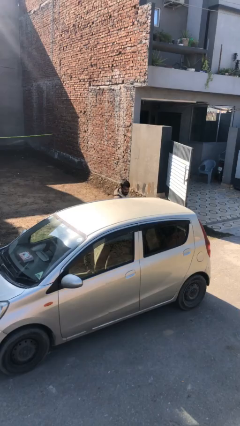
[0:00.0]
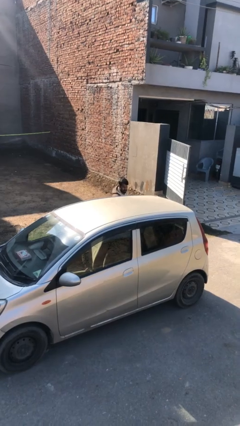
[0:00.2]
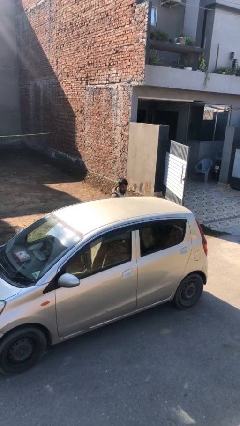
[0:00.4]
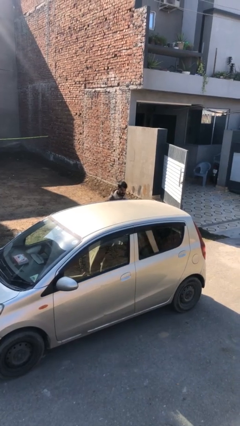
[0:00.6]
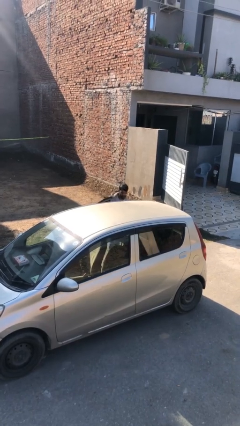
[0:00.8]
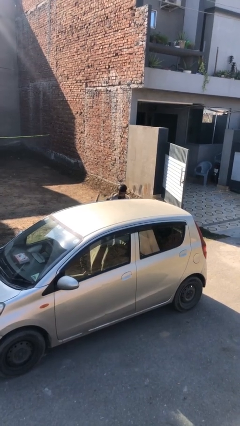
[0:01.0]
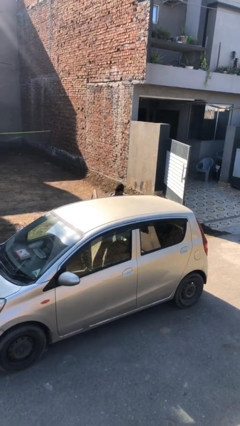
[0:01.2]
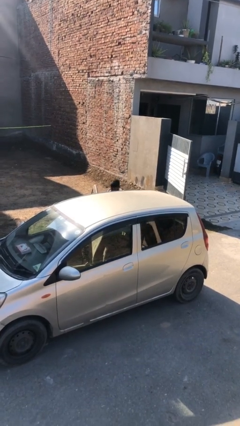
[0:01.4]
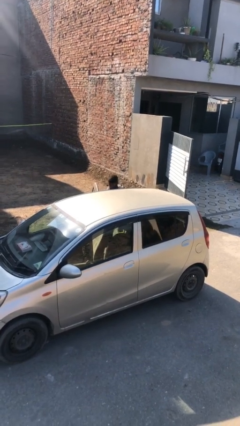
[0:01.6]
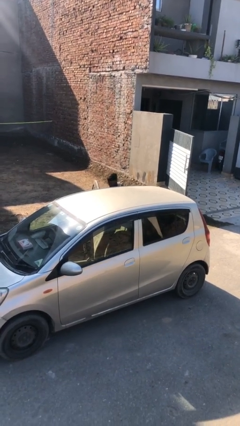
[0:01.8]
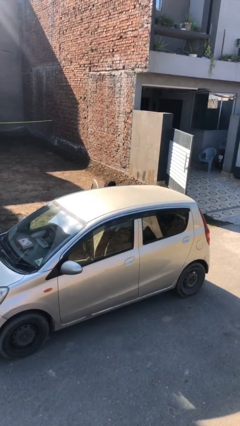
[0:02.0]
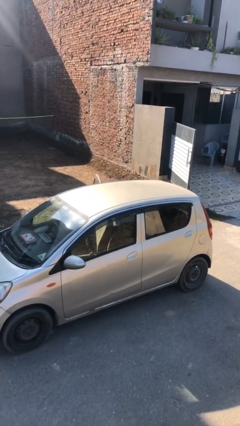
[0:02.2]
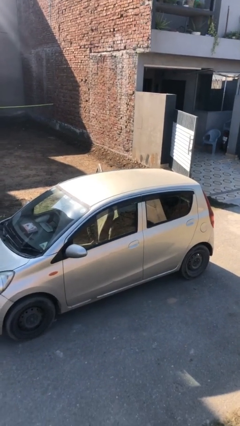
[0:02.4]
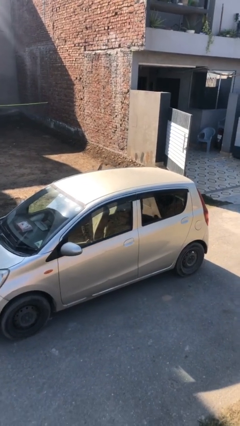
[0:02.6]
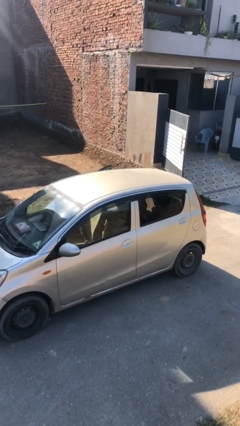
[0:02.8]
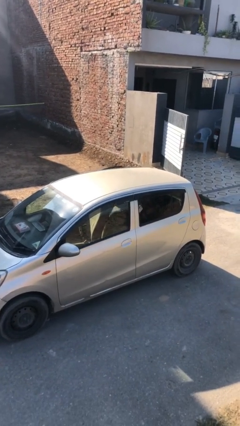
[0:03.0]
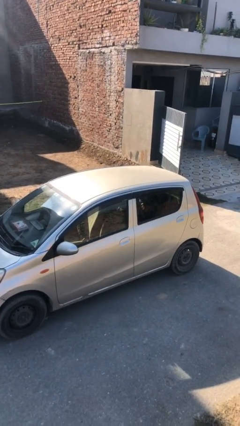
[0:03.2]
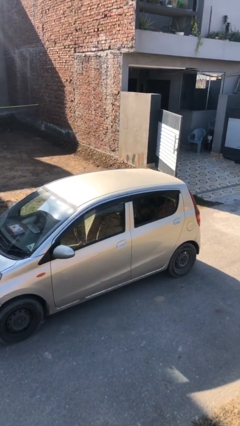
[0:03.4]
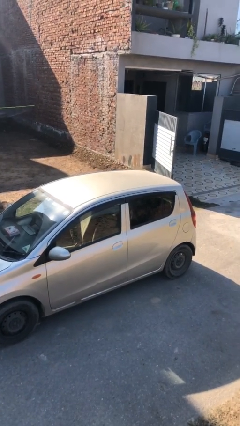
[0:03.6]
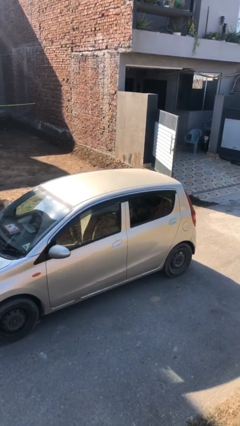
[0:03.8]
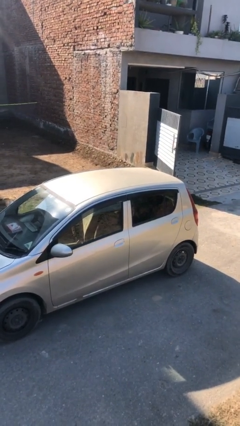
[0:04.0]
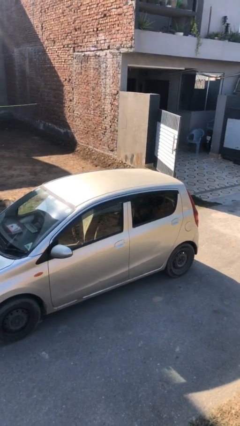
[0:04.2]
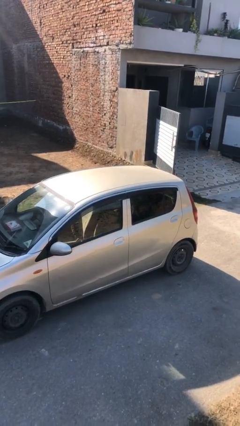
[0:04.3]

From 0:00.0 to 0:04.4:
car picks up person

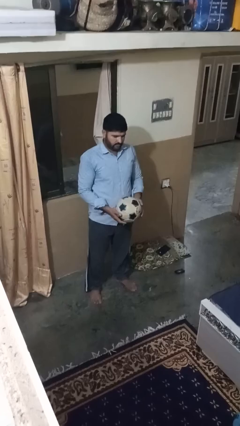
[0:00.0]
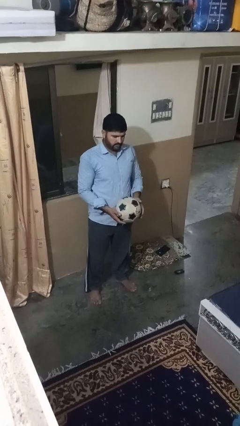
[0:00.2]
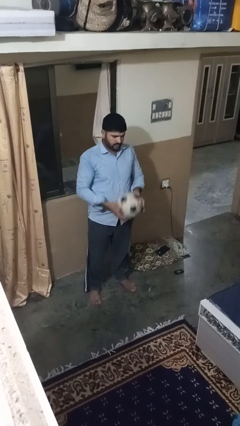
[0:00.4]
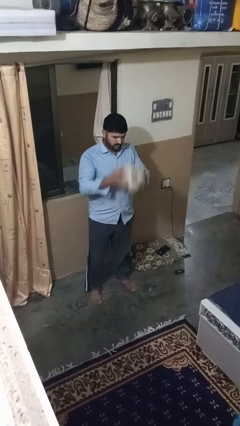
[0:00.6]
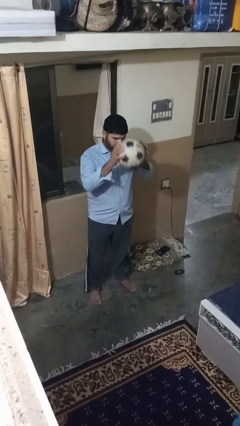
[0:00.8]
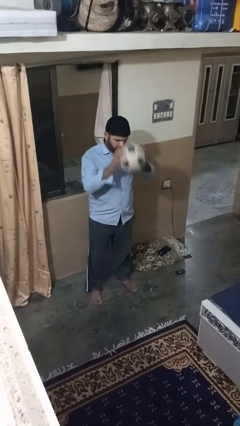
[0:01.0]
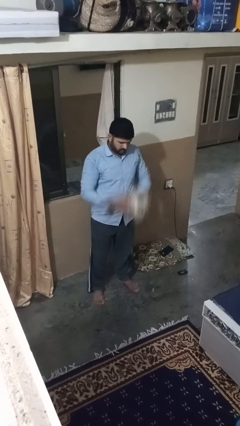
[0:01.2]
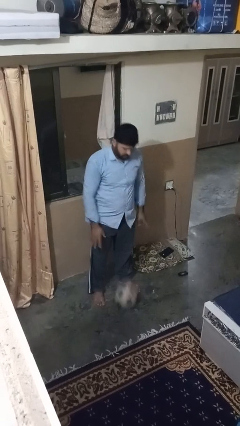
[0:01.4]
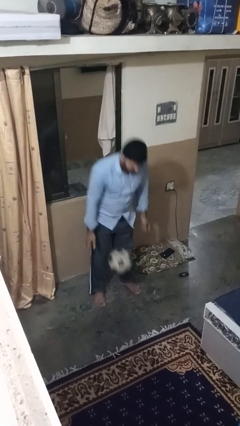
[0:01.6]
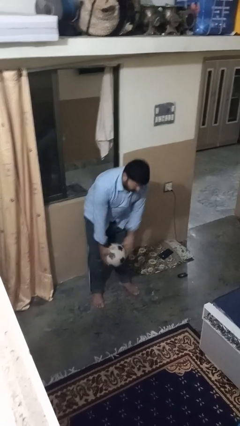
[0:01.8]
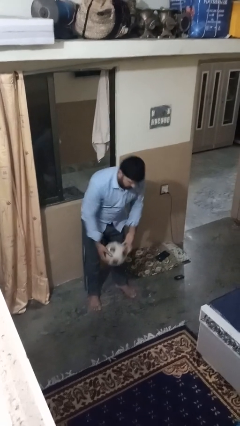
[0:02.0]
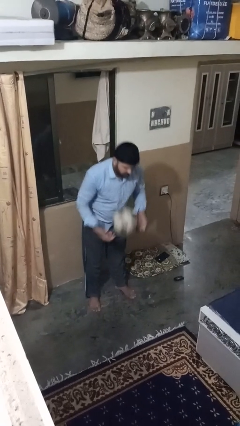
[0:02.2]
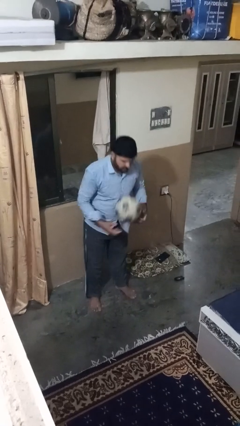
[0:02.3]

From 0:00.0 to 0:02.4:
person bounces ball on floor

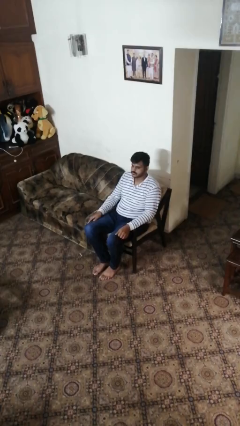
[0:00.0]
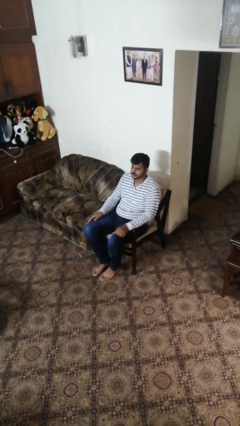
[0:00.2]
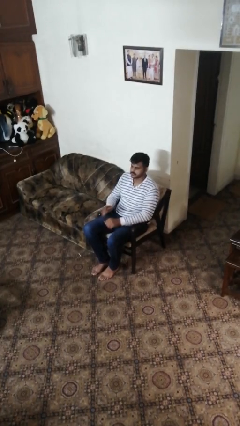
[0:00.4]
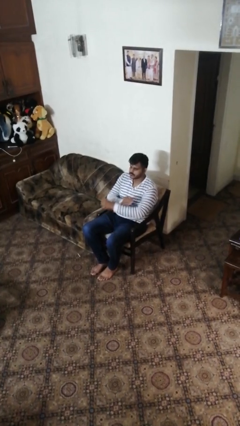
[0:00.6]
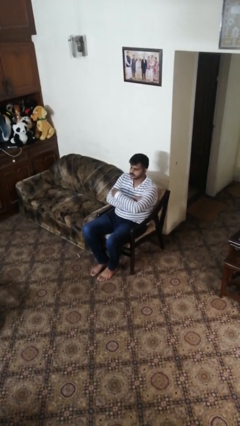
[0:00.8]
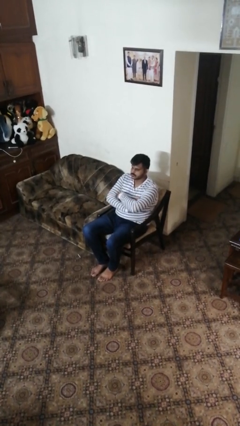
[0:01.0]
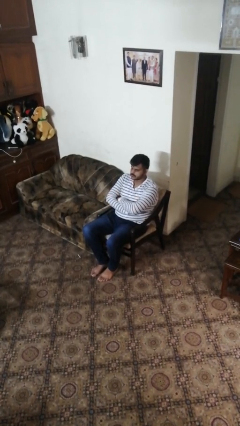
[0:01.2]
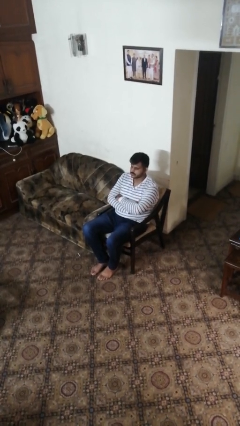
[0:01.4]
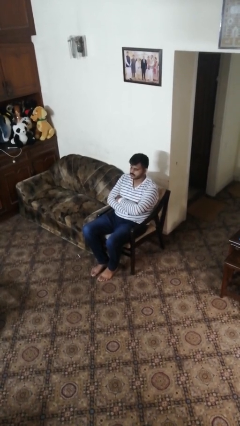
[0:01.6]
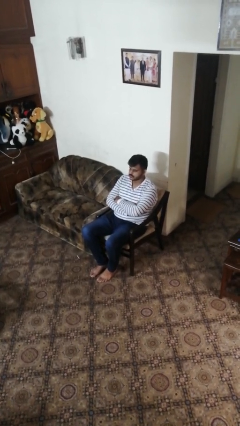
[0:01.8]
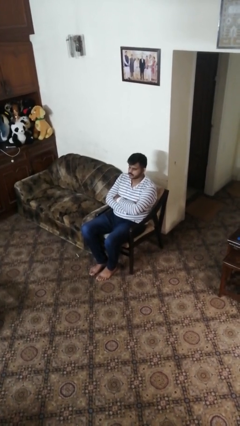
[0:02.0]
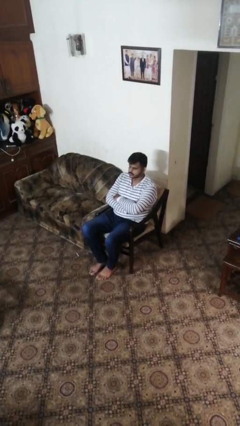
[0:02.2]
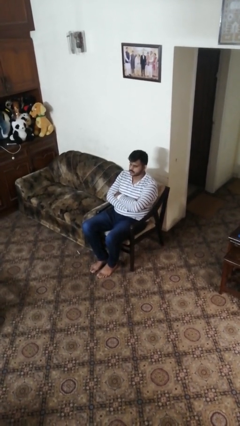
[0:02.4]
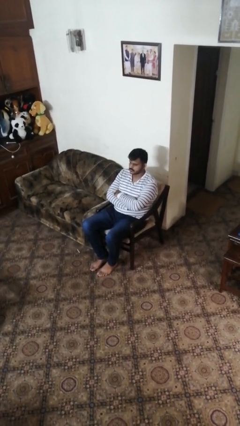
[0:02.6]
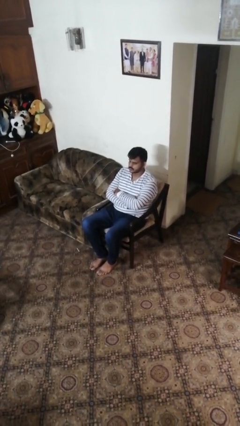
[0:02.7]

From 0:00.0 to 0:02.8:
person crosses arms

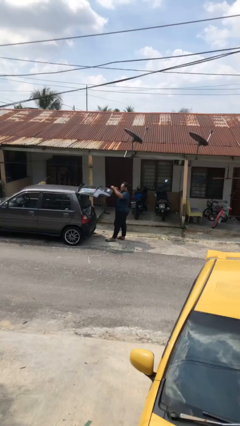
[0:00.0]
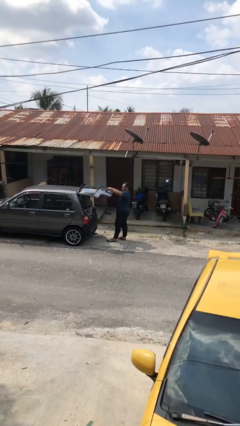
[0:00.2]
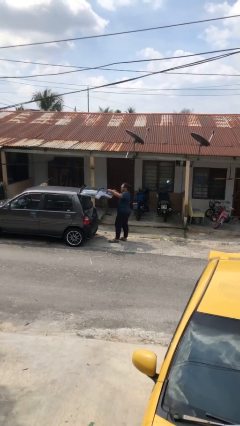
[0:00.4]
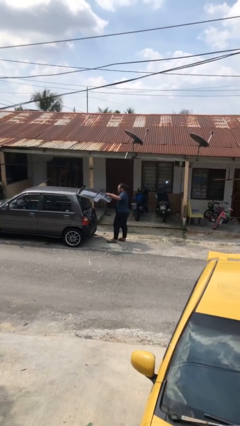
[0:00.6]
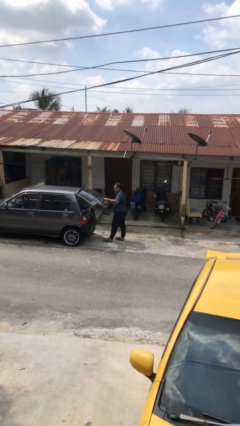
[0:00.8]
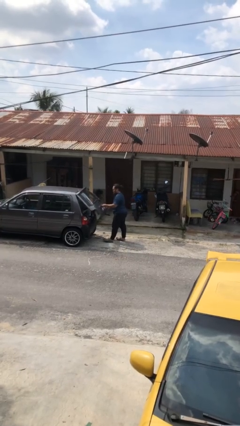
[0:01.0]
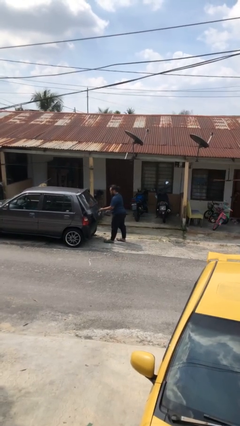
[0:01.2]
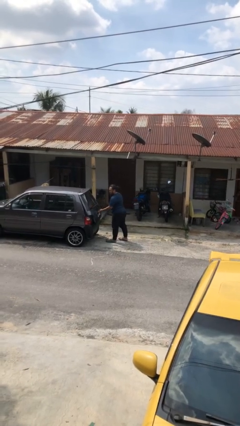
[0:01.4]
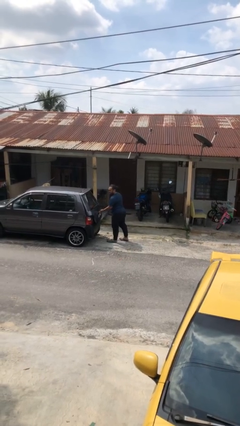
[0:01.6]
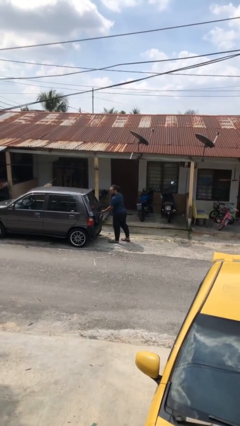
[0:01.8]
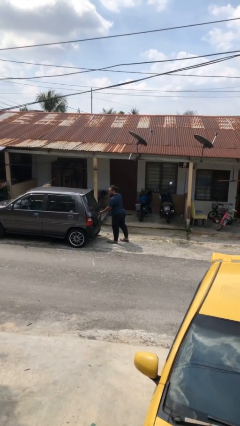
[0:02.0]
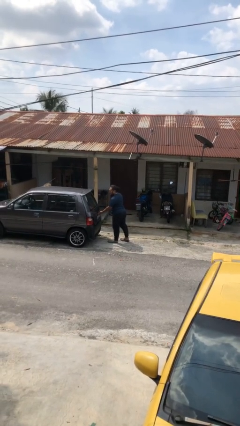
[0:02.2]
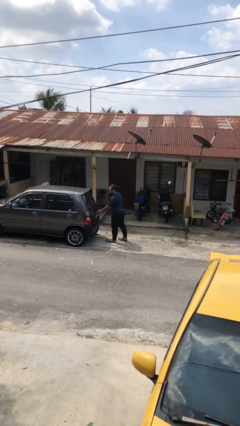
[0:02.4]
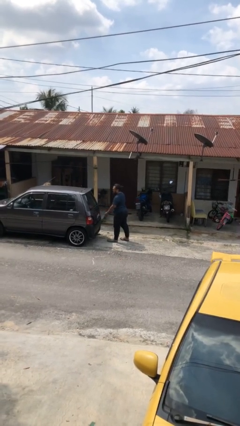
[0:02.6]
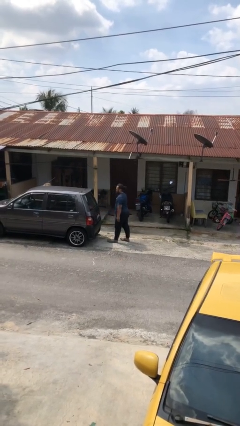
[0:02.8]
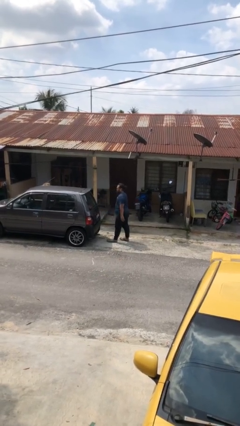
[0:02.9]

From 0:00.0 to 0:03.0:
person closes car trunk

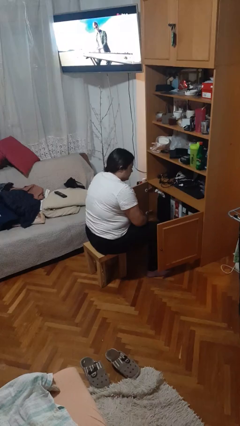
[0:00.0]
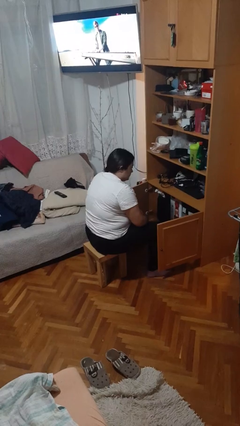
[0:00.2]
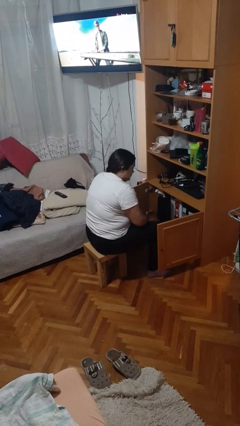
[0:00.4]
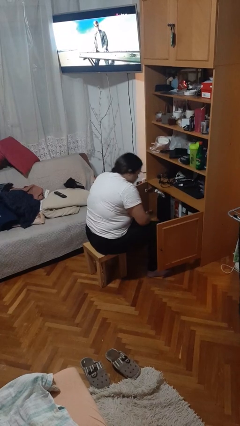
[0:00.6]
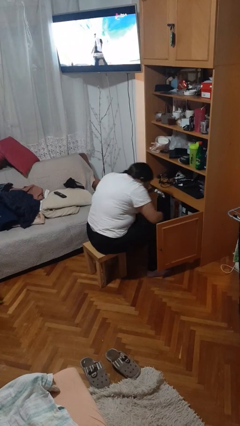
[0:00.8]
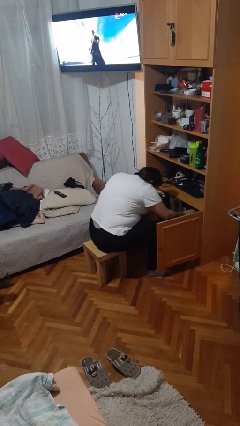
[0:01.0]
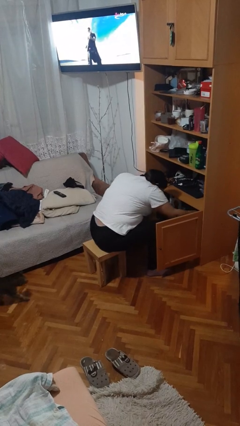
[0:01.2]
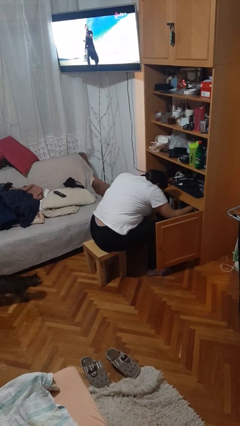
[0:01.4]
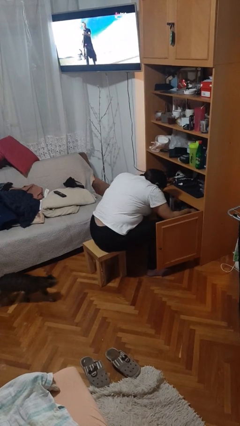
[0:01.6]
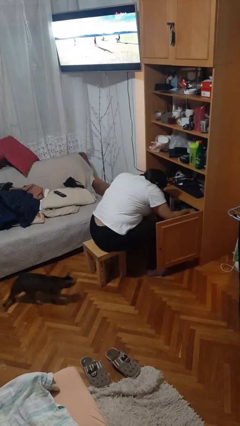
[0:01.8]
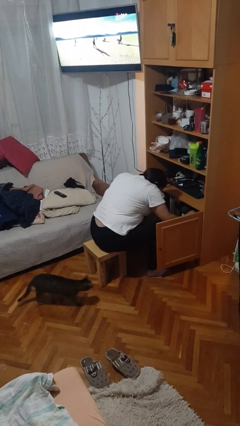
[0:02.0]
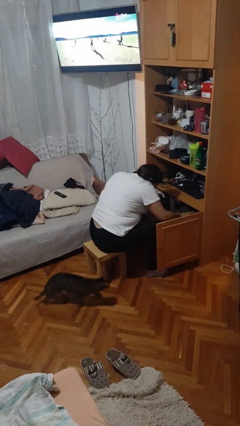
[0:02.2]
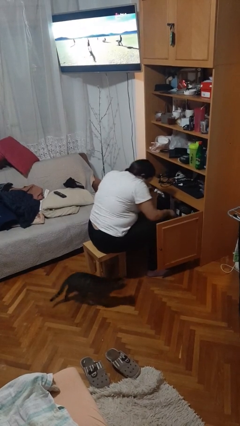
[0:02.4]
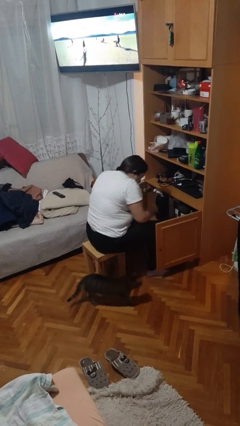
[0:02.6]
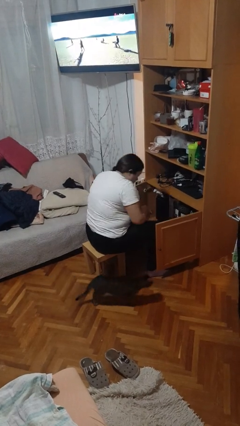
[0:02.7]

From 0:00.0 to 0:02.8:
person searches in cabinet

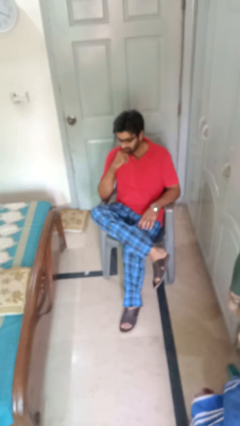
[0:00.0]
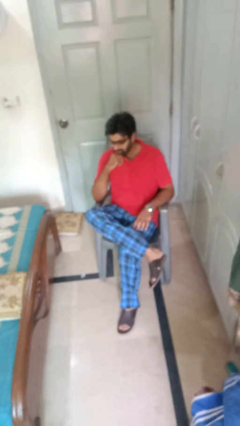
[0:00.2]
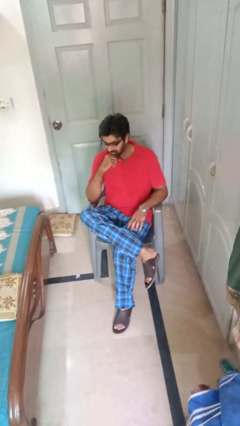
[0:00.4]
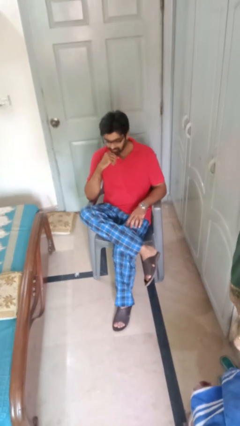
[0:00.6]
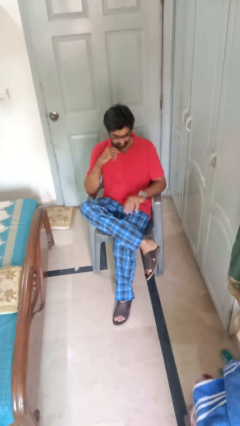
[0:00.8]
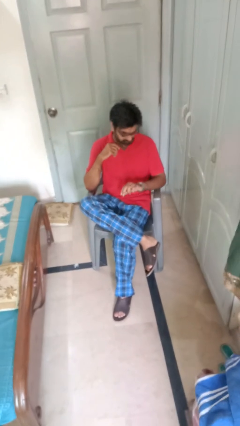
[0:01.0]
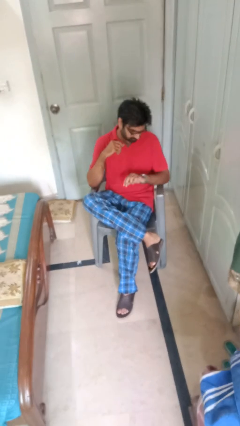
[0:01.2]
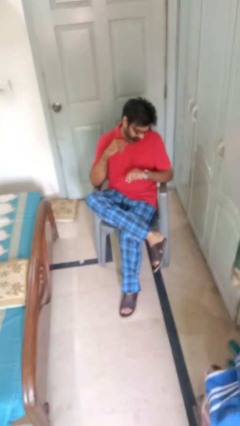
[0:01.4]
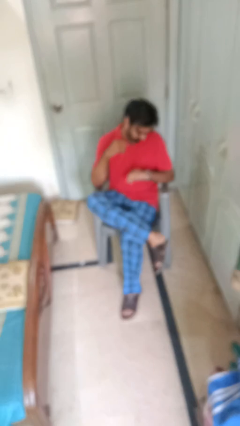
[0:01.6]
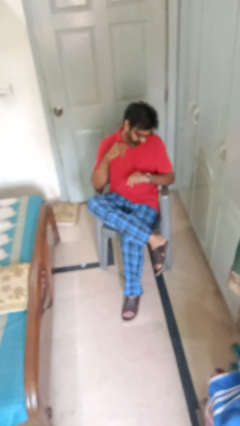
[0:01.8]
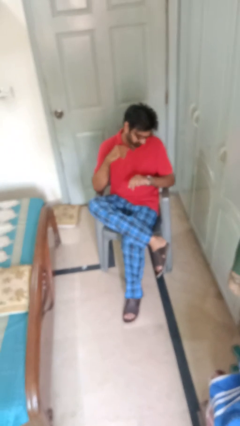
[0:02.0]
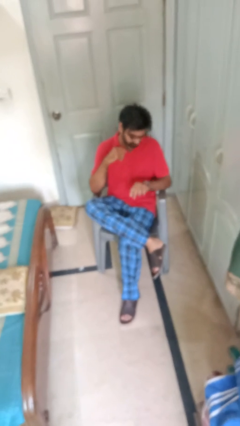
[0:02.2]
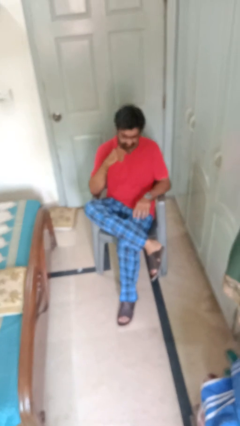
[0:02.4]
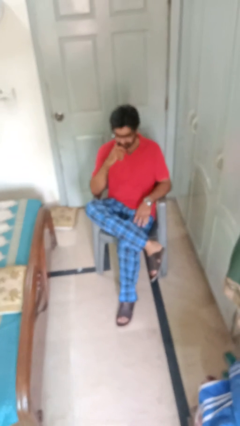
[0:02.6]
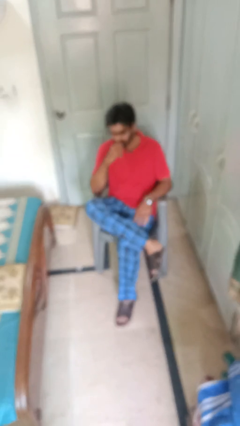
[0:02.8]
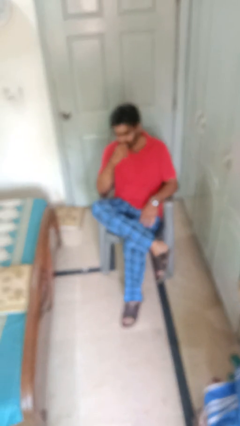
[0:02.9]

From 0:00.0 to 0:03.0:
person looks at wristwatch
